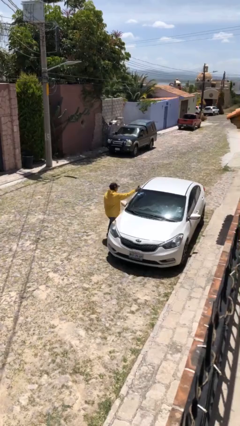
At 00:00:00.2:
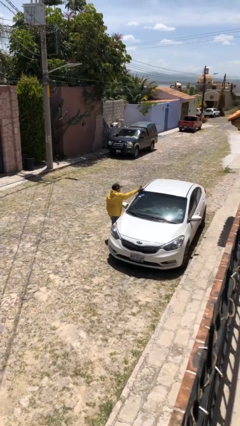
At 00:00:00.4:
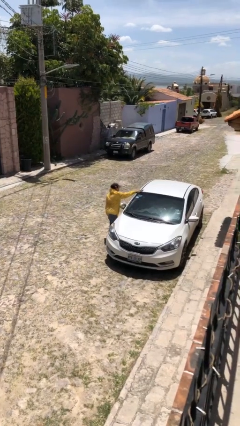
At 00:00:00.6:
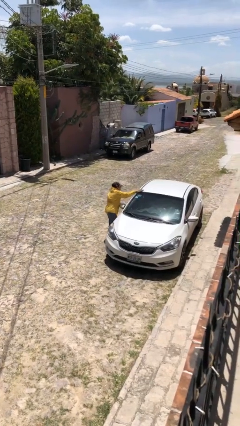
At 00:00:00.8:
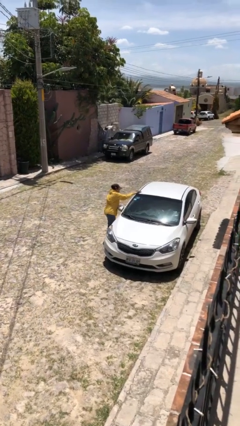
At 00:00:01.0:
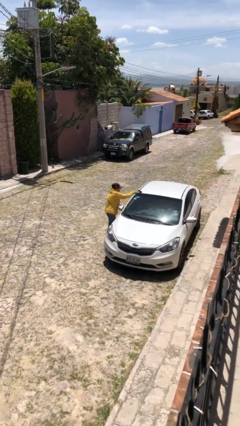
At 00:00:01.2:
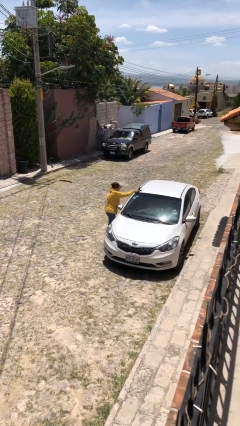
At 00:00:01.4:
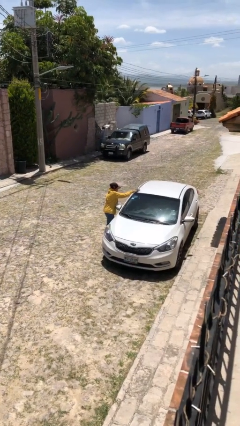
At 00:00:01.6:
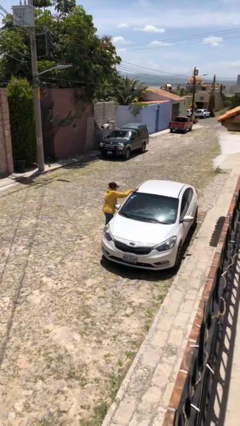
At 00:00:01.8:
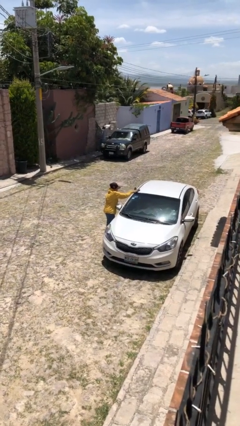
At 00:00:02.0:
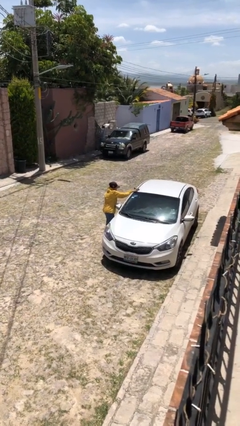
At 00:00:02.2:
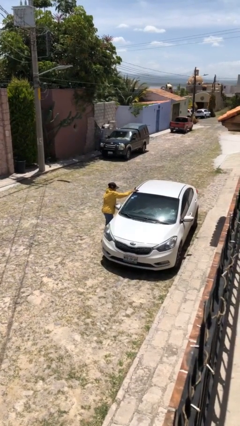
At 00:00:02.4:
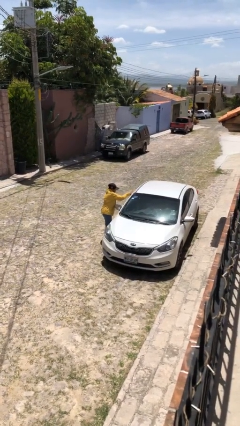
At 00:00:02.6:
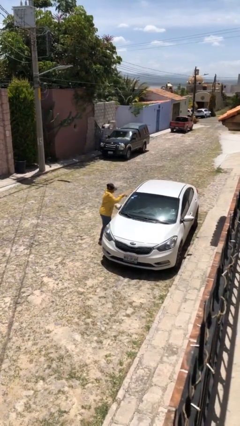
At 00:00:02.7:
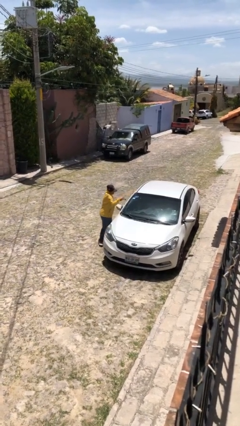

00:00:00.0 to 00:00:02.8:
person polishes car with rag

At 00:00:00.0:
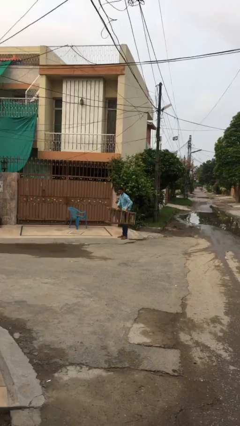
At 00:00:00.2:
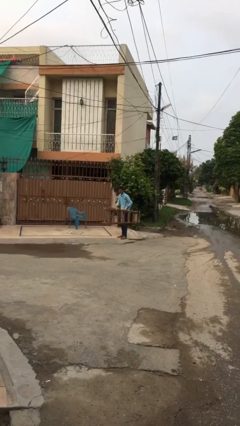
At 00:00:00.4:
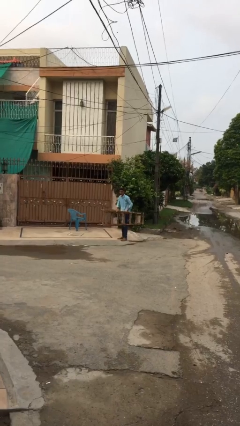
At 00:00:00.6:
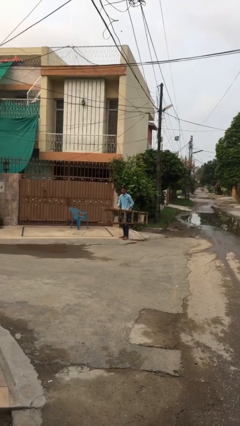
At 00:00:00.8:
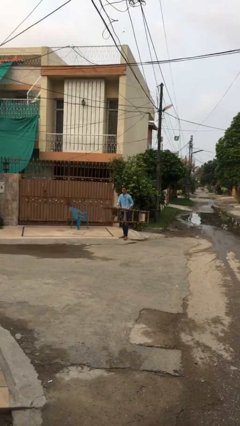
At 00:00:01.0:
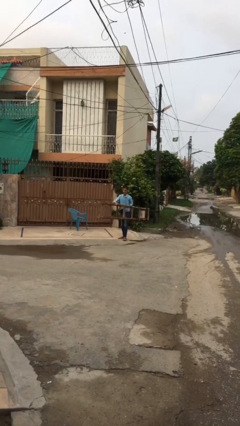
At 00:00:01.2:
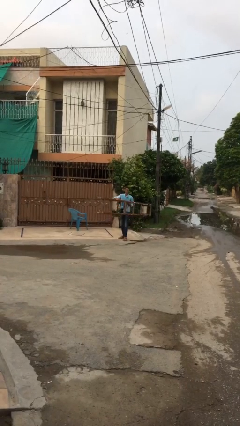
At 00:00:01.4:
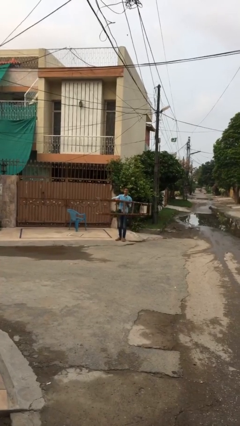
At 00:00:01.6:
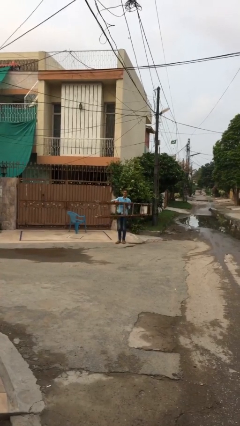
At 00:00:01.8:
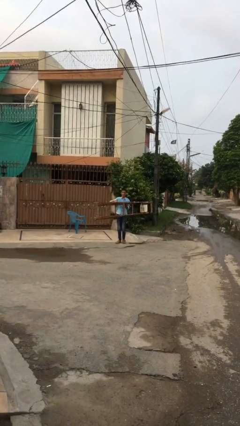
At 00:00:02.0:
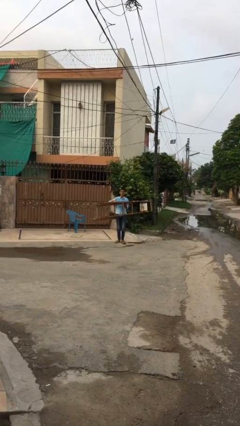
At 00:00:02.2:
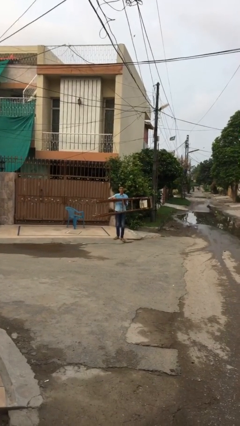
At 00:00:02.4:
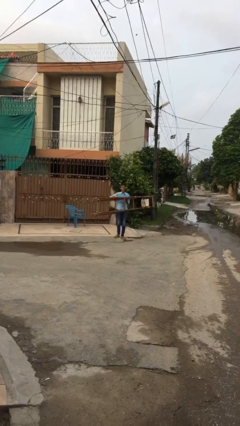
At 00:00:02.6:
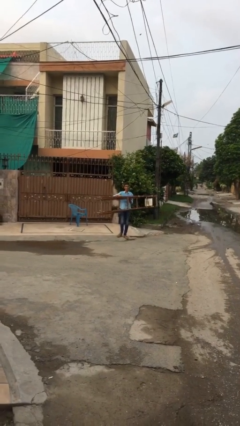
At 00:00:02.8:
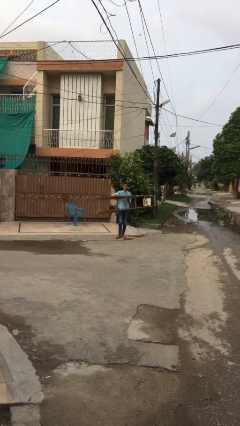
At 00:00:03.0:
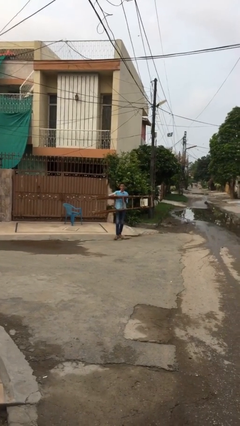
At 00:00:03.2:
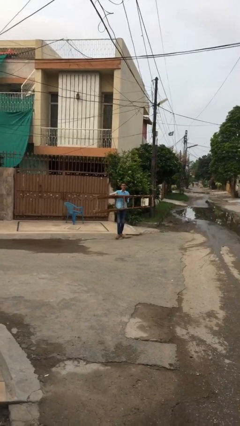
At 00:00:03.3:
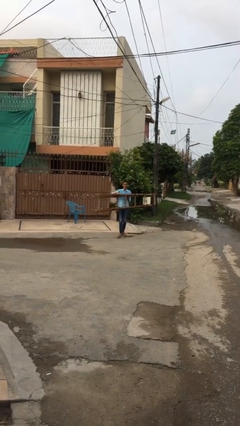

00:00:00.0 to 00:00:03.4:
person carries heavy object

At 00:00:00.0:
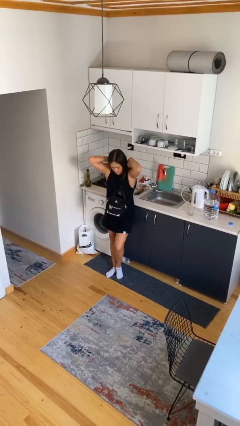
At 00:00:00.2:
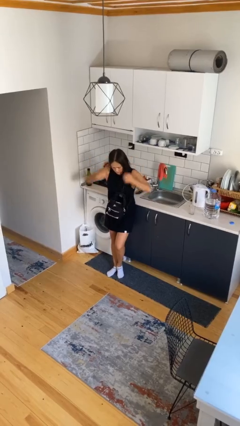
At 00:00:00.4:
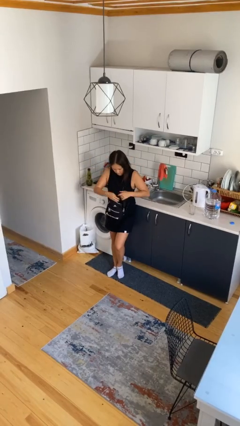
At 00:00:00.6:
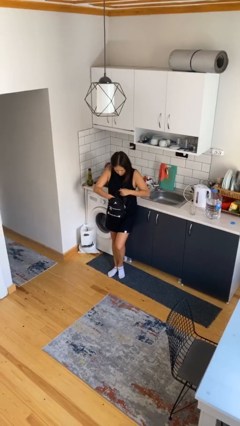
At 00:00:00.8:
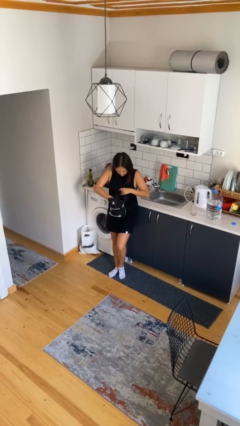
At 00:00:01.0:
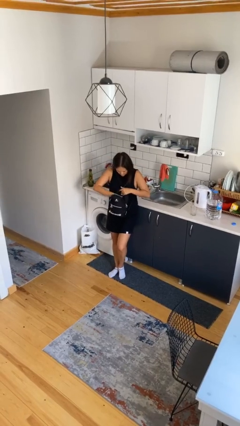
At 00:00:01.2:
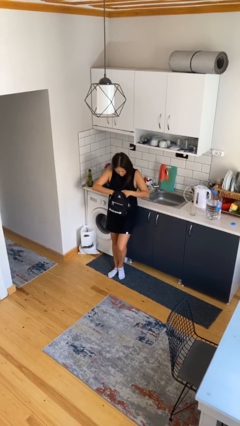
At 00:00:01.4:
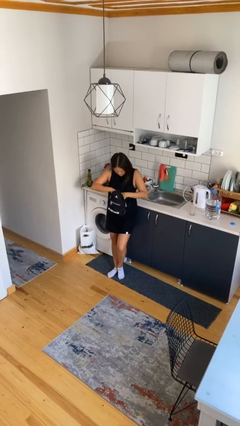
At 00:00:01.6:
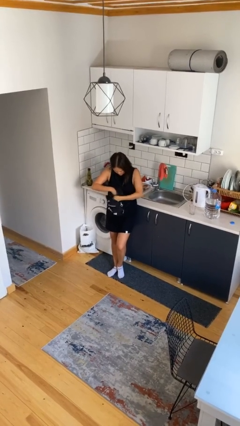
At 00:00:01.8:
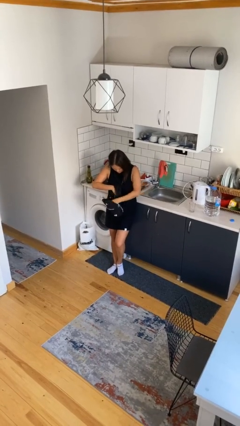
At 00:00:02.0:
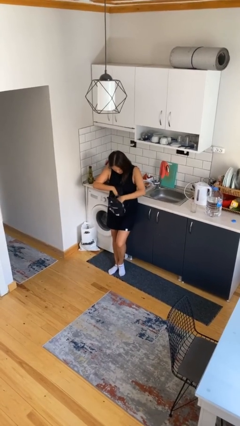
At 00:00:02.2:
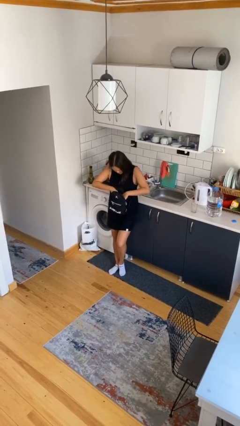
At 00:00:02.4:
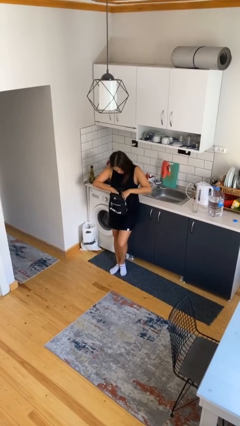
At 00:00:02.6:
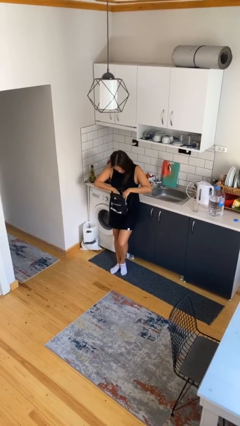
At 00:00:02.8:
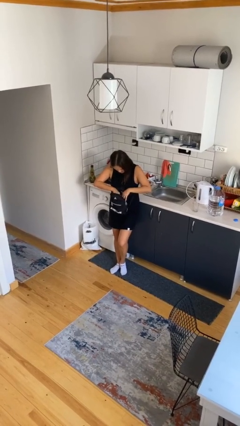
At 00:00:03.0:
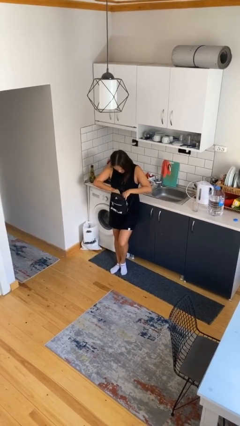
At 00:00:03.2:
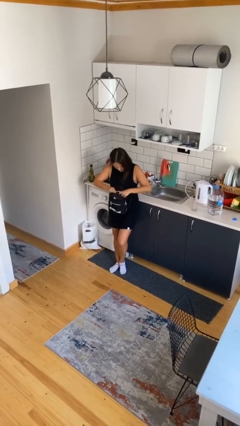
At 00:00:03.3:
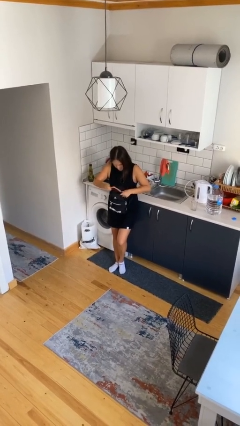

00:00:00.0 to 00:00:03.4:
person searches in backpack

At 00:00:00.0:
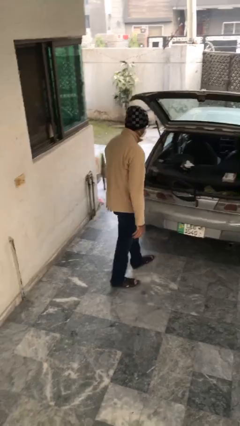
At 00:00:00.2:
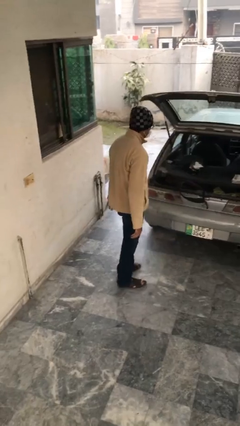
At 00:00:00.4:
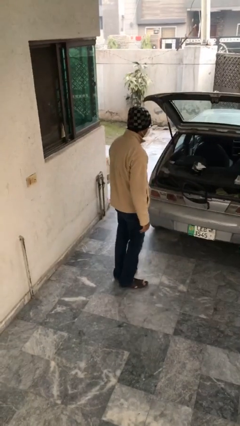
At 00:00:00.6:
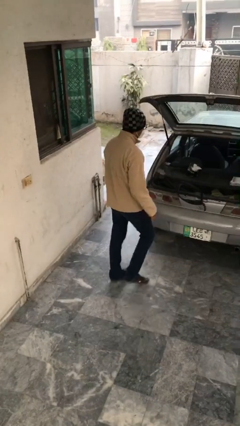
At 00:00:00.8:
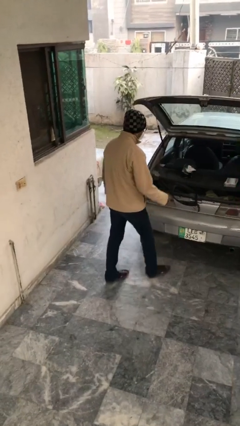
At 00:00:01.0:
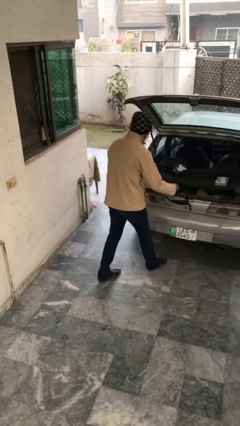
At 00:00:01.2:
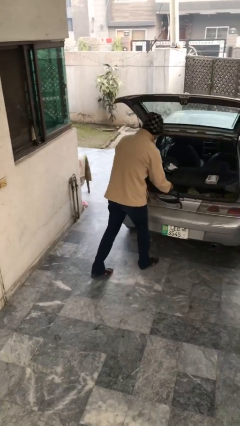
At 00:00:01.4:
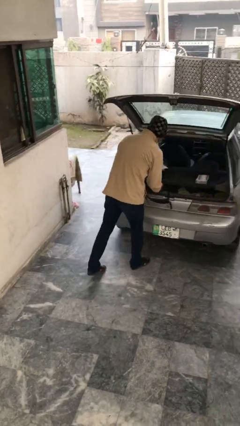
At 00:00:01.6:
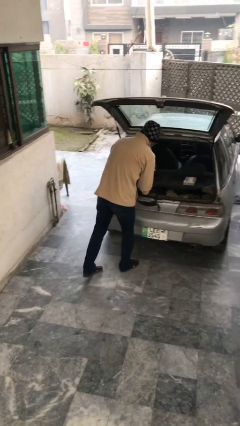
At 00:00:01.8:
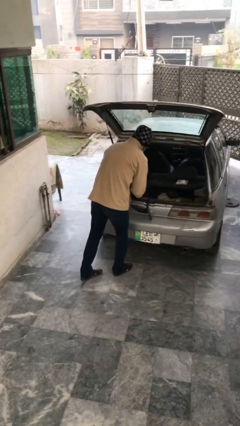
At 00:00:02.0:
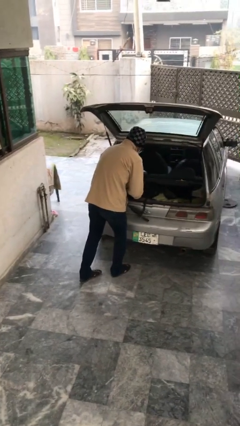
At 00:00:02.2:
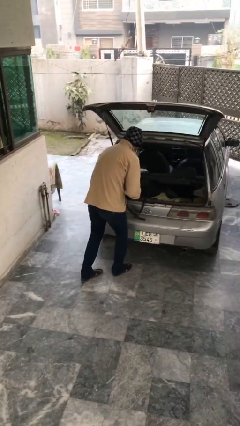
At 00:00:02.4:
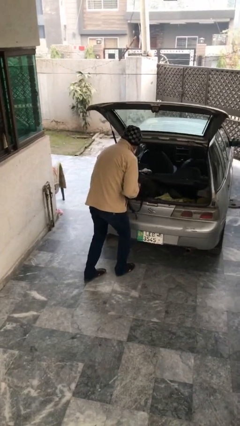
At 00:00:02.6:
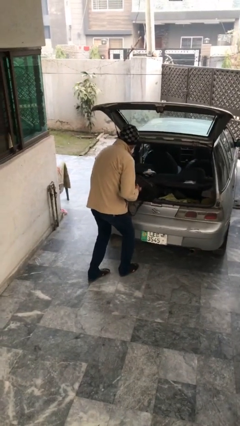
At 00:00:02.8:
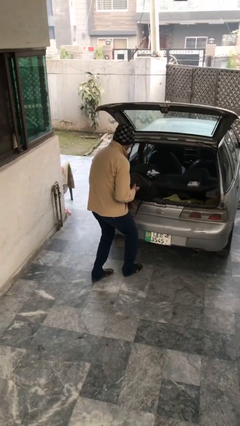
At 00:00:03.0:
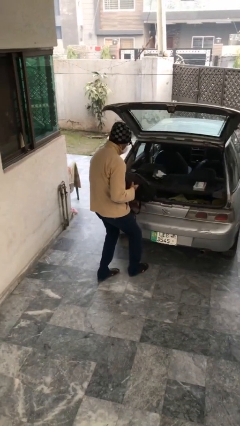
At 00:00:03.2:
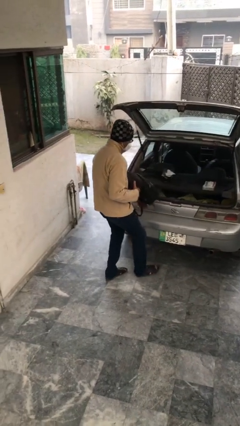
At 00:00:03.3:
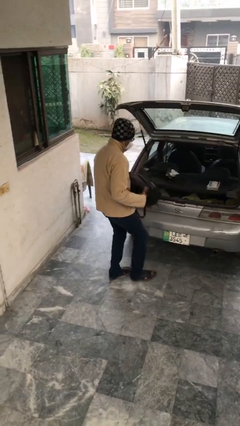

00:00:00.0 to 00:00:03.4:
person unloads car

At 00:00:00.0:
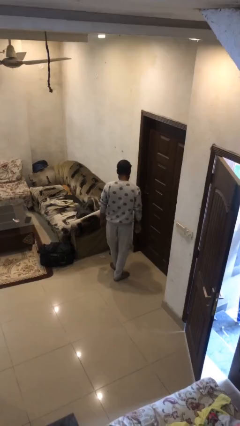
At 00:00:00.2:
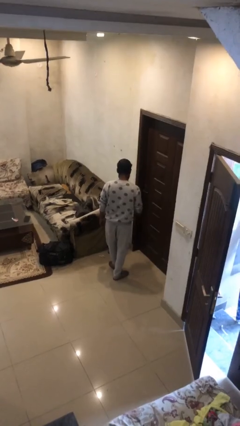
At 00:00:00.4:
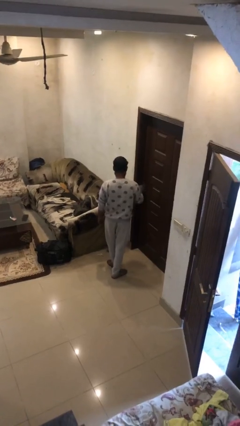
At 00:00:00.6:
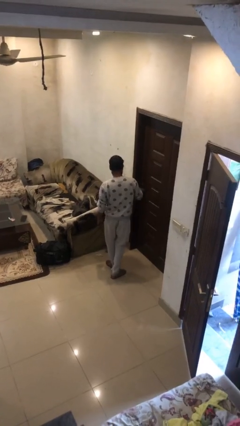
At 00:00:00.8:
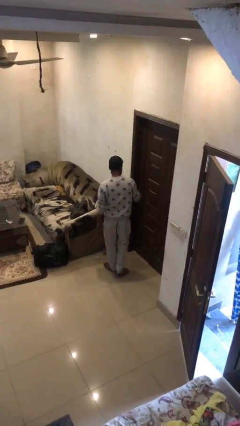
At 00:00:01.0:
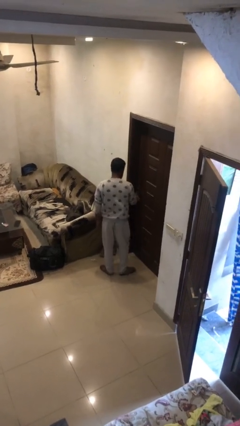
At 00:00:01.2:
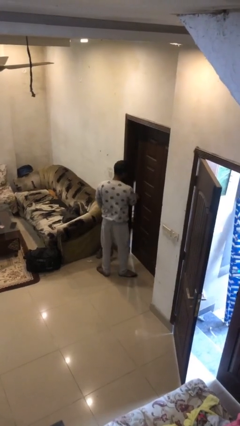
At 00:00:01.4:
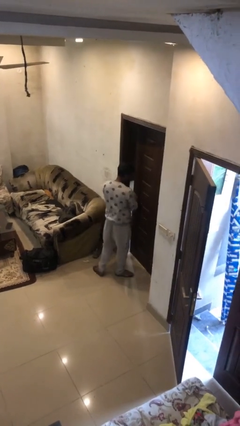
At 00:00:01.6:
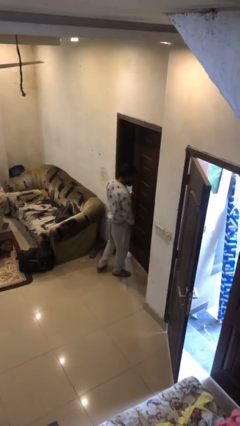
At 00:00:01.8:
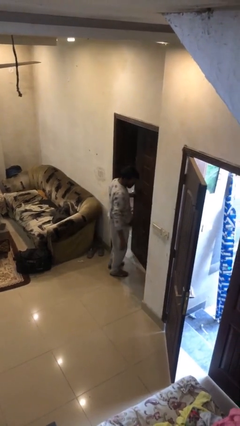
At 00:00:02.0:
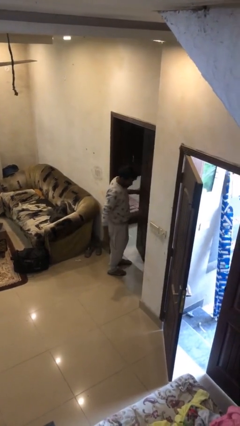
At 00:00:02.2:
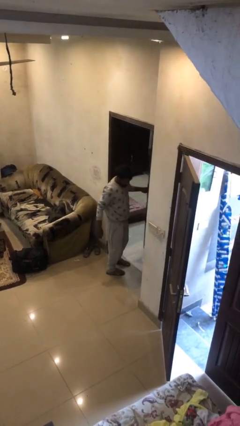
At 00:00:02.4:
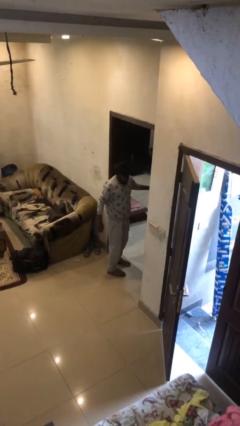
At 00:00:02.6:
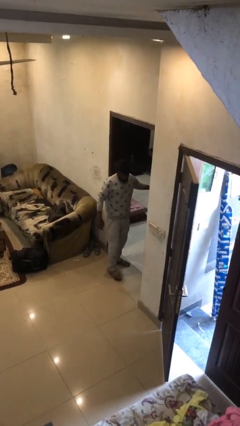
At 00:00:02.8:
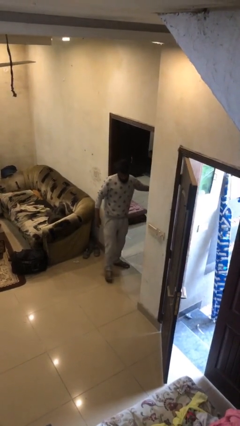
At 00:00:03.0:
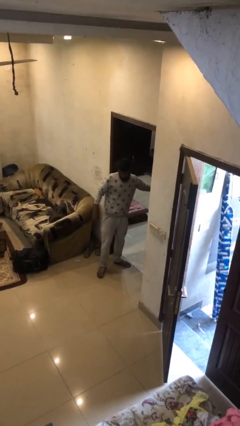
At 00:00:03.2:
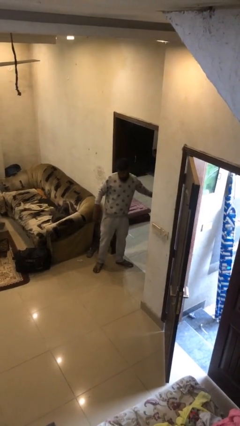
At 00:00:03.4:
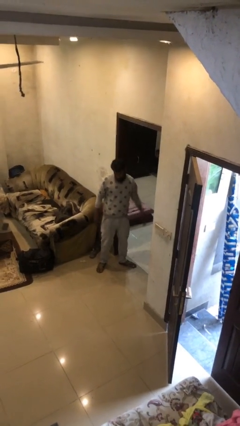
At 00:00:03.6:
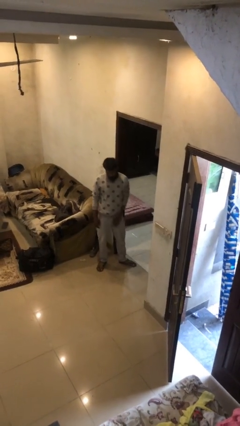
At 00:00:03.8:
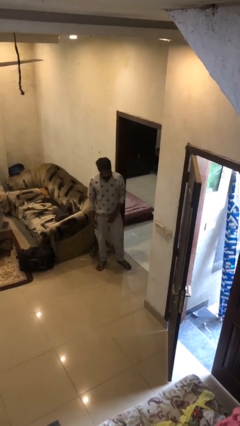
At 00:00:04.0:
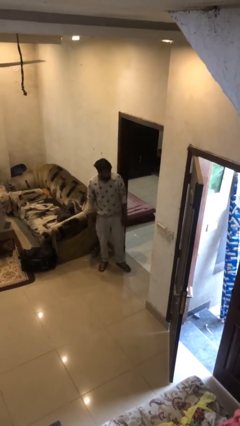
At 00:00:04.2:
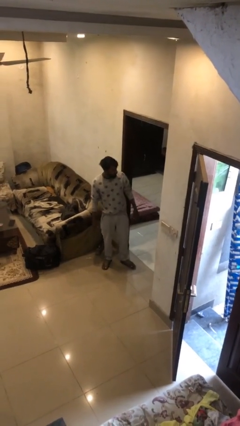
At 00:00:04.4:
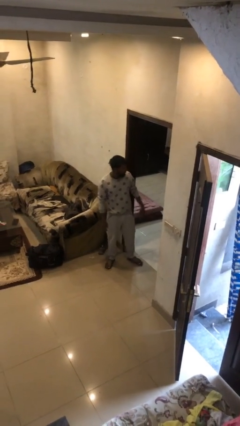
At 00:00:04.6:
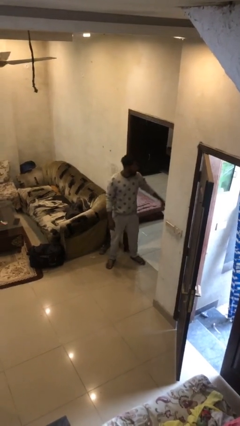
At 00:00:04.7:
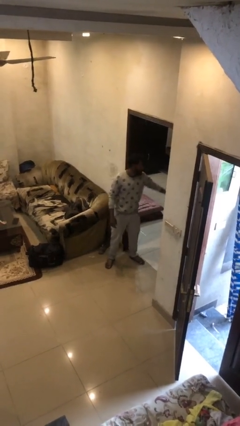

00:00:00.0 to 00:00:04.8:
person opens facility door
